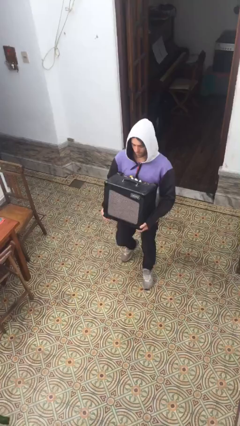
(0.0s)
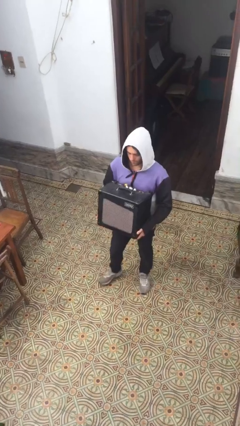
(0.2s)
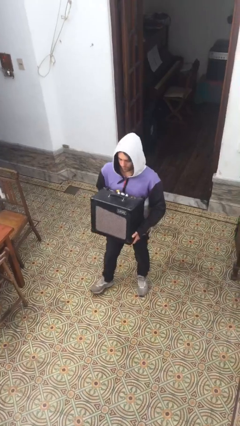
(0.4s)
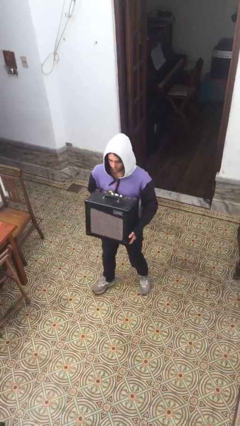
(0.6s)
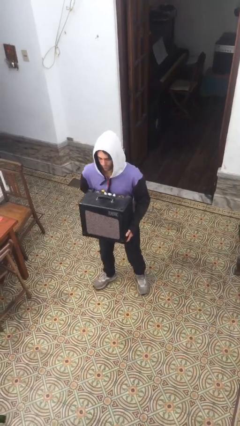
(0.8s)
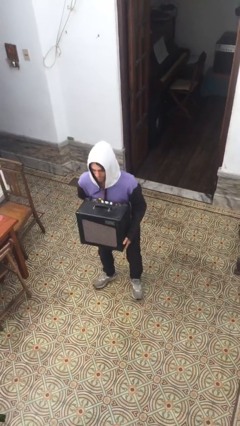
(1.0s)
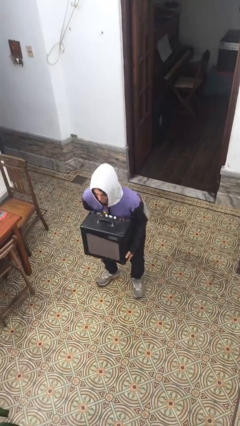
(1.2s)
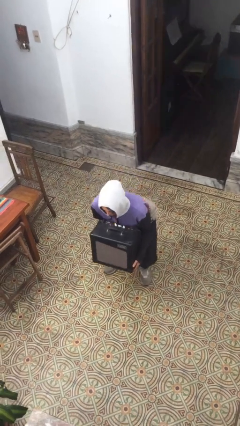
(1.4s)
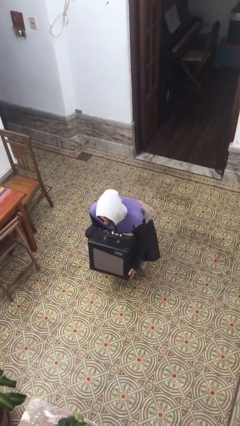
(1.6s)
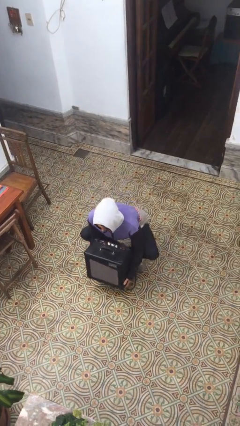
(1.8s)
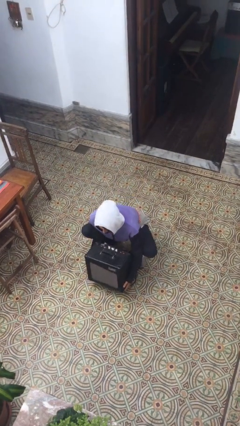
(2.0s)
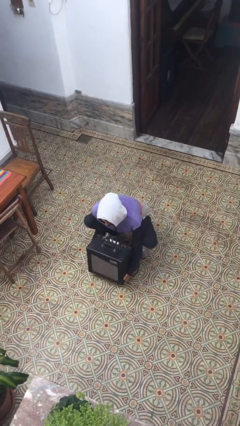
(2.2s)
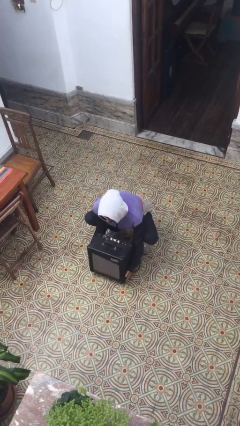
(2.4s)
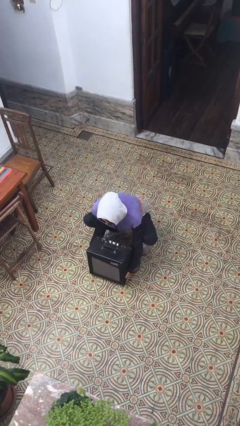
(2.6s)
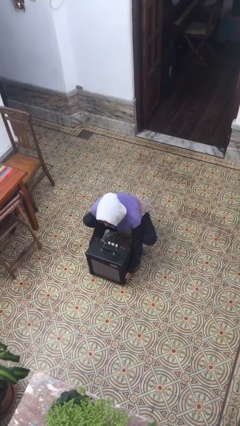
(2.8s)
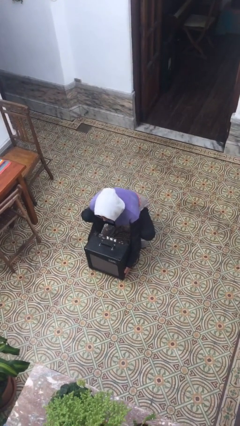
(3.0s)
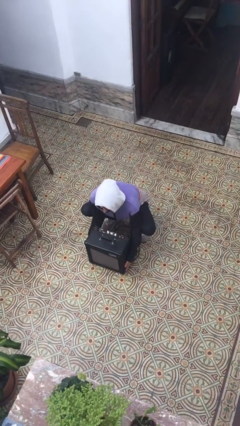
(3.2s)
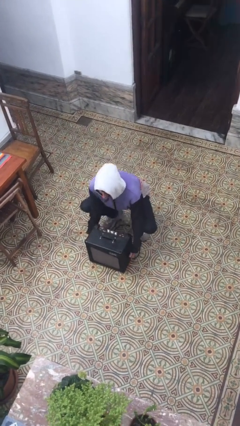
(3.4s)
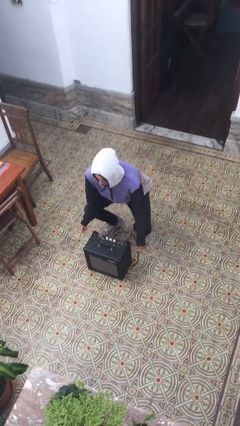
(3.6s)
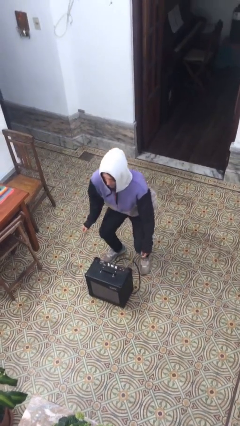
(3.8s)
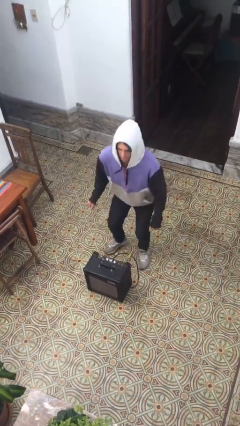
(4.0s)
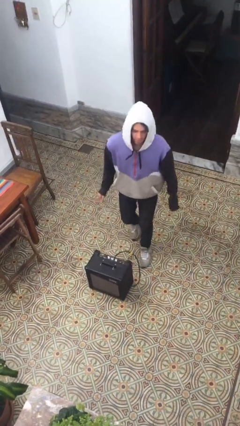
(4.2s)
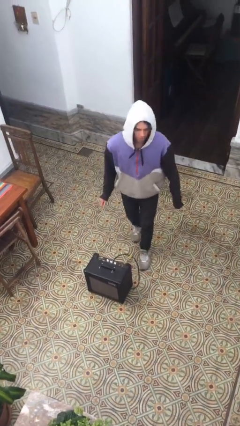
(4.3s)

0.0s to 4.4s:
person puts down object on floor

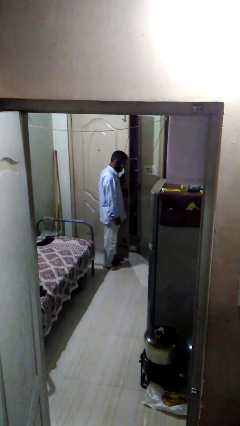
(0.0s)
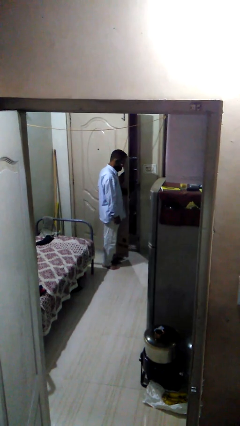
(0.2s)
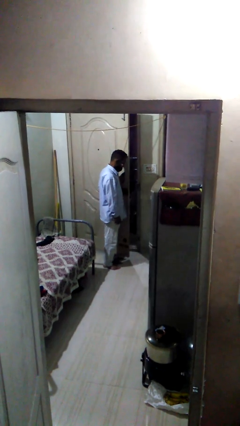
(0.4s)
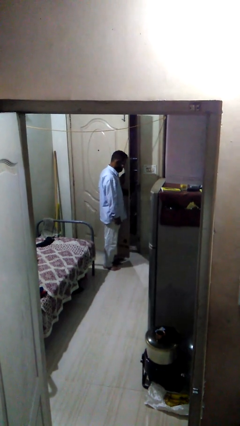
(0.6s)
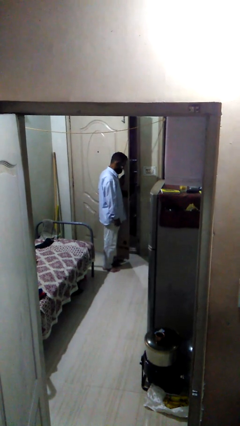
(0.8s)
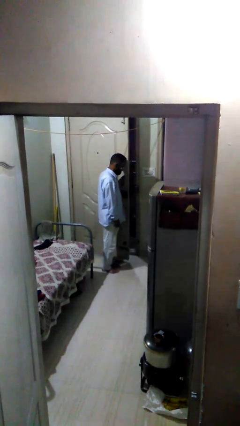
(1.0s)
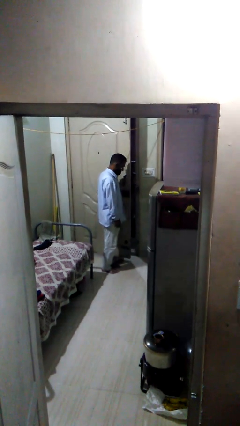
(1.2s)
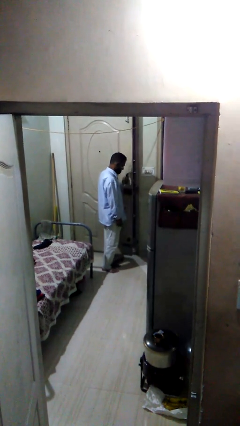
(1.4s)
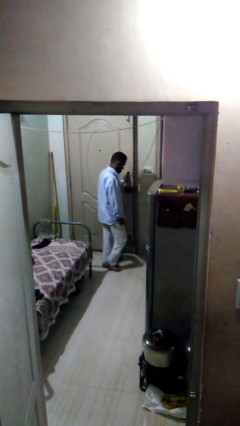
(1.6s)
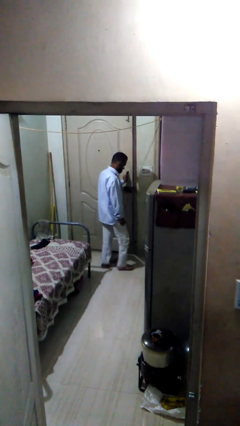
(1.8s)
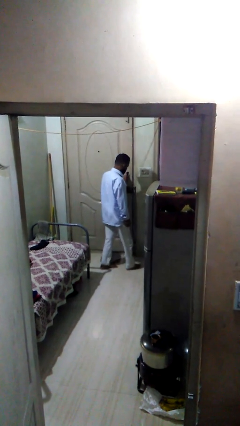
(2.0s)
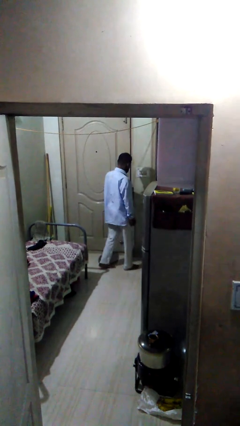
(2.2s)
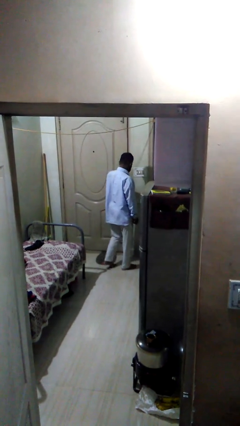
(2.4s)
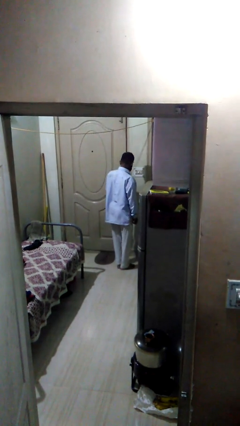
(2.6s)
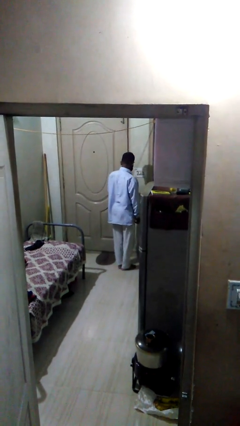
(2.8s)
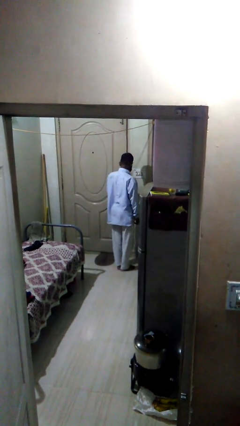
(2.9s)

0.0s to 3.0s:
person closes facility door

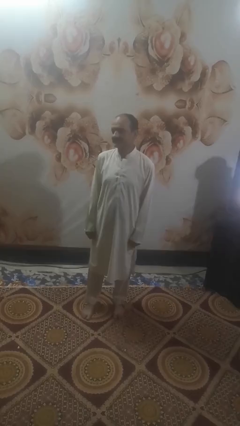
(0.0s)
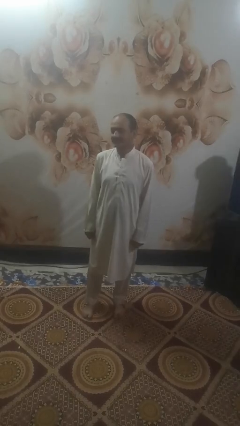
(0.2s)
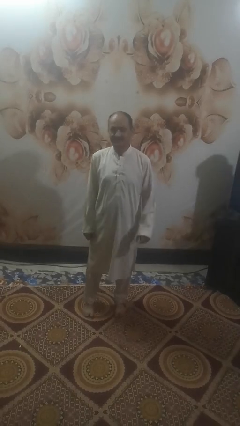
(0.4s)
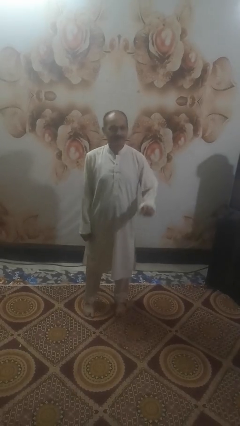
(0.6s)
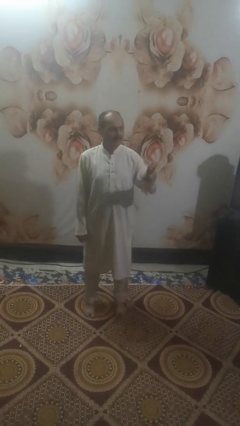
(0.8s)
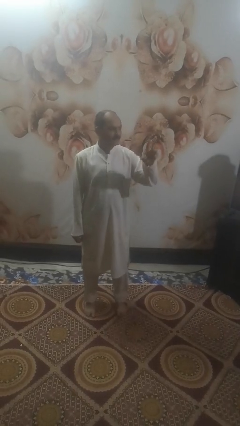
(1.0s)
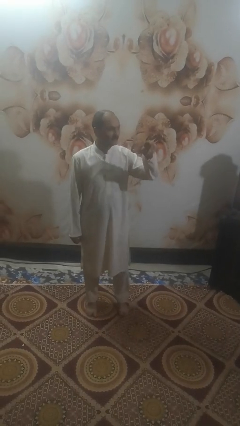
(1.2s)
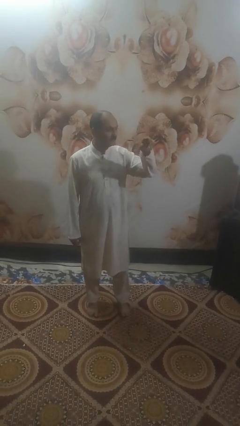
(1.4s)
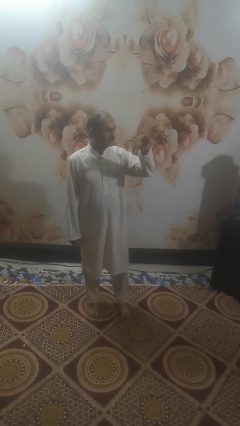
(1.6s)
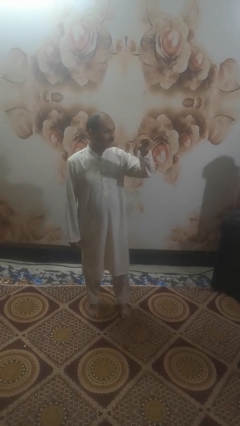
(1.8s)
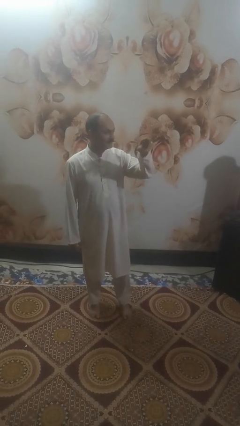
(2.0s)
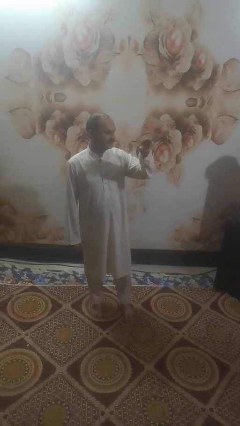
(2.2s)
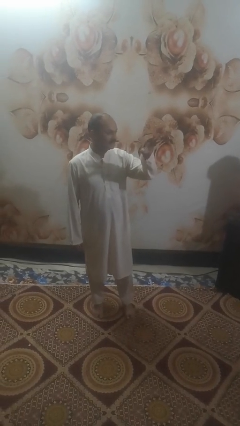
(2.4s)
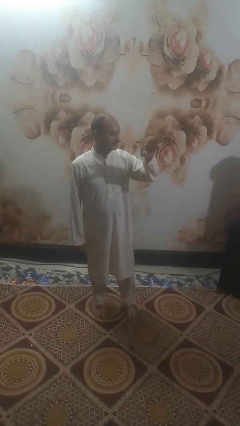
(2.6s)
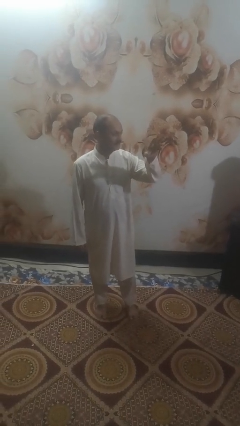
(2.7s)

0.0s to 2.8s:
person gestures come here

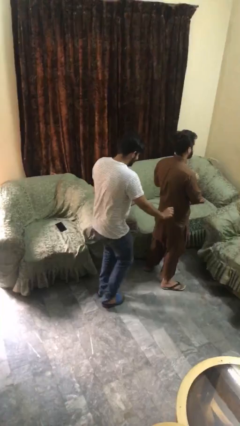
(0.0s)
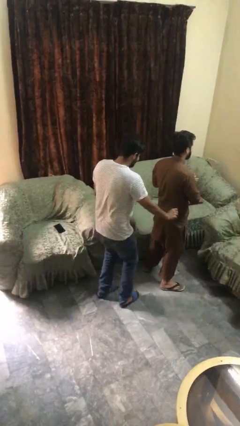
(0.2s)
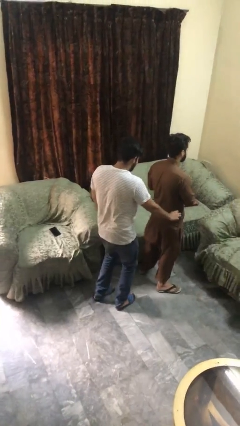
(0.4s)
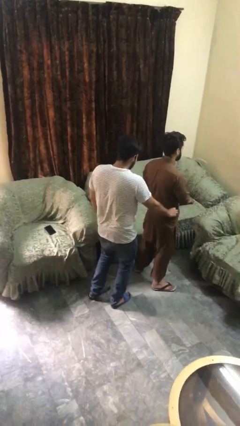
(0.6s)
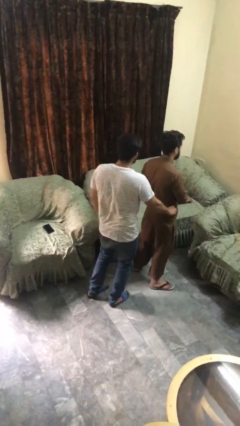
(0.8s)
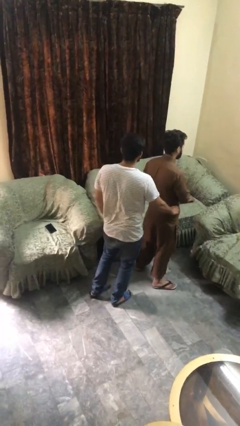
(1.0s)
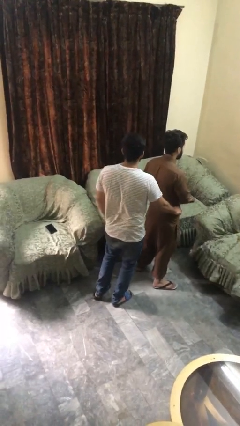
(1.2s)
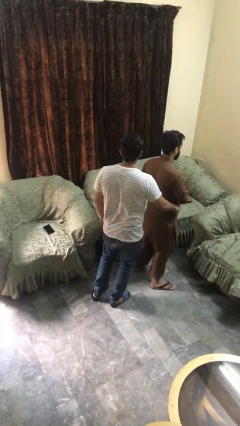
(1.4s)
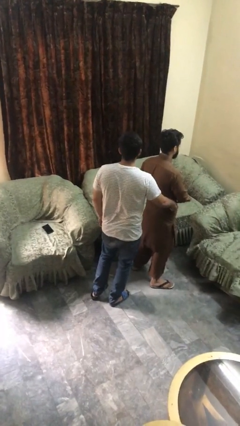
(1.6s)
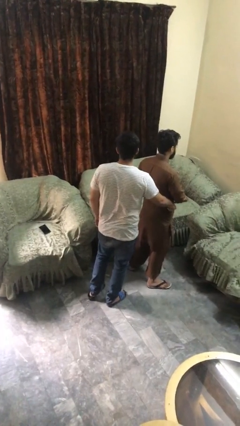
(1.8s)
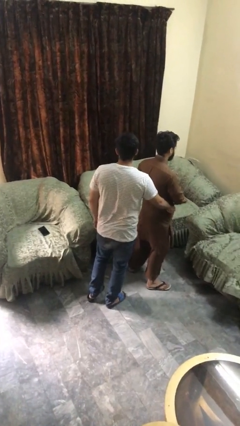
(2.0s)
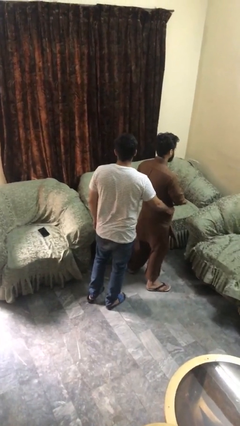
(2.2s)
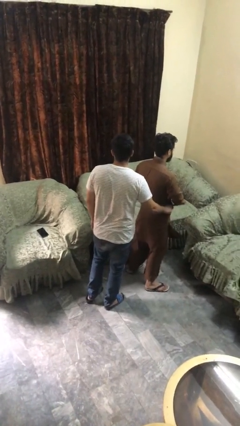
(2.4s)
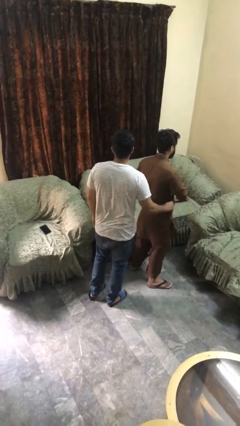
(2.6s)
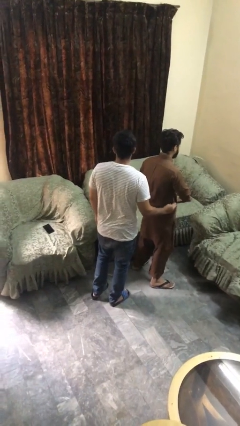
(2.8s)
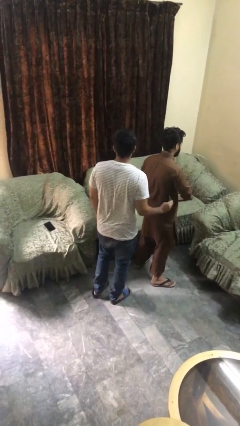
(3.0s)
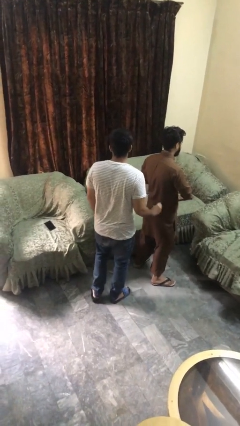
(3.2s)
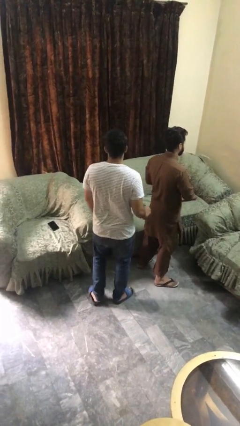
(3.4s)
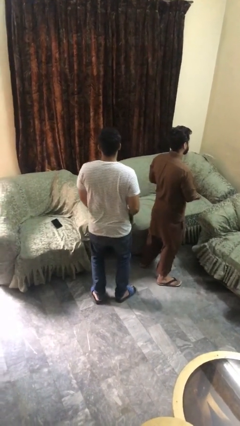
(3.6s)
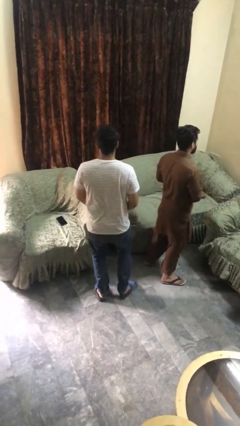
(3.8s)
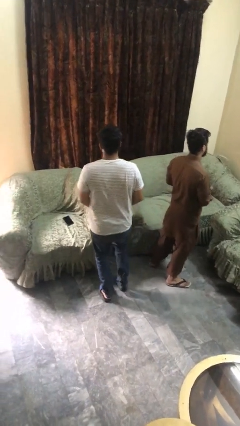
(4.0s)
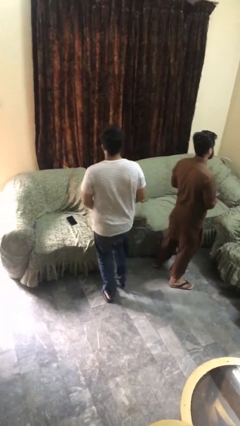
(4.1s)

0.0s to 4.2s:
person steals object from person

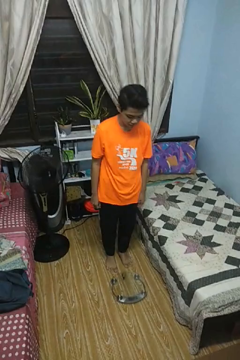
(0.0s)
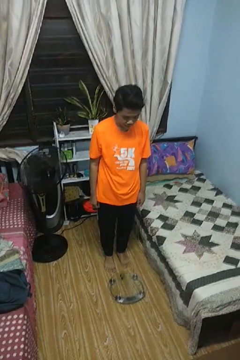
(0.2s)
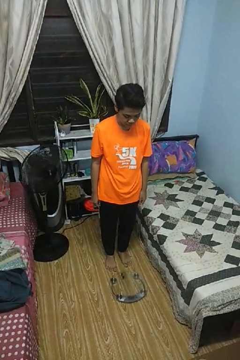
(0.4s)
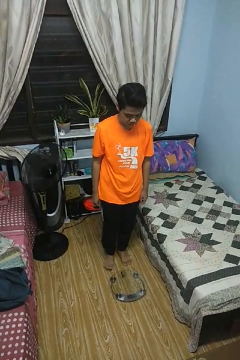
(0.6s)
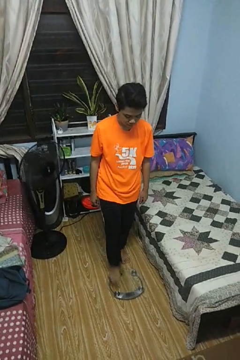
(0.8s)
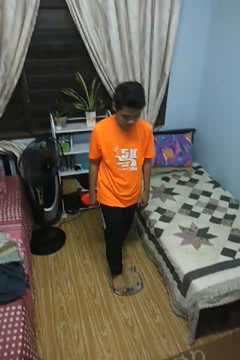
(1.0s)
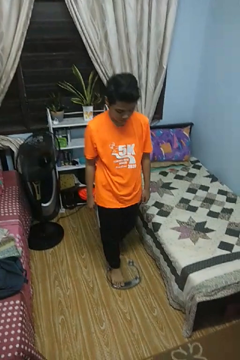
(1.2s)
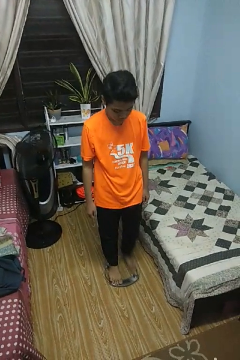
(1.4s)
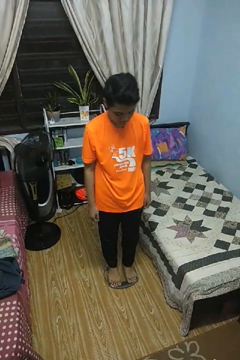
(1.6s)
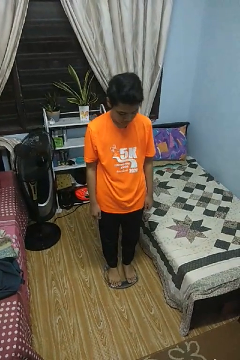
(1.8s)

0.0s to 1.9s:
person uses bodyweight scale

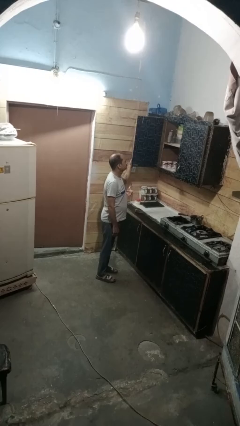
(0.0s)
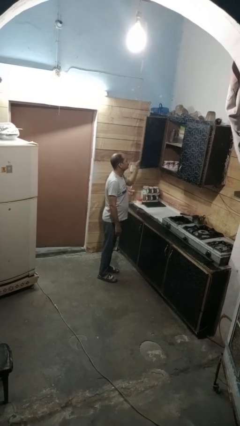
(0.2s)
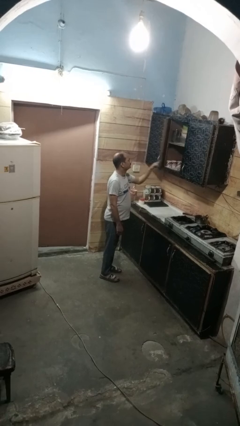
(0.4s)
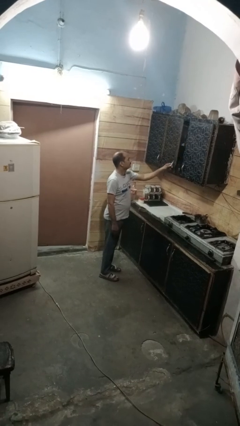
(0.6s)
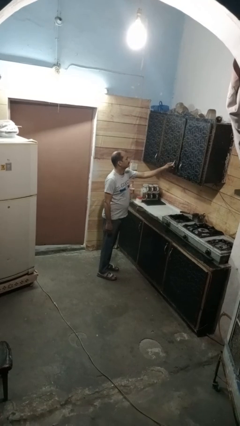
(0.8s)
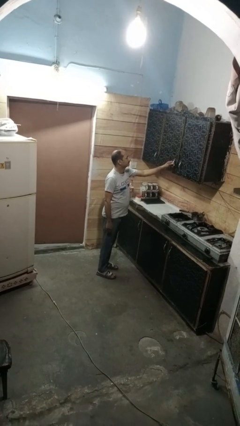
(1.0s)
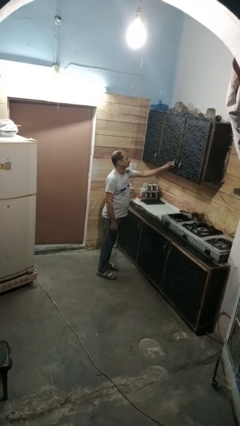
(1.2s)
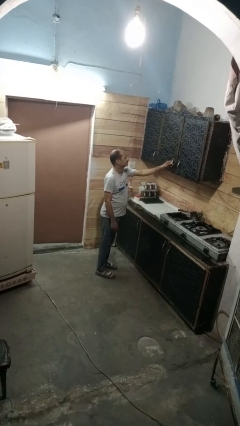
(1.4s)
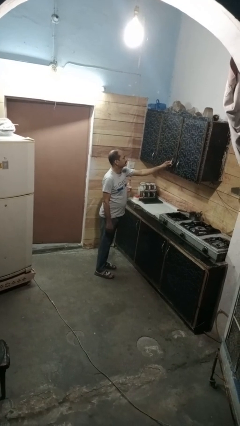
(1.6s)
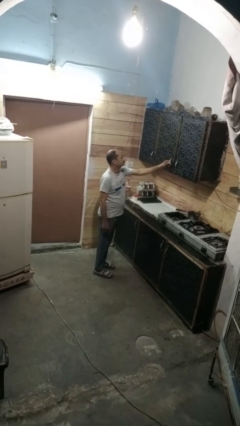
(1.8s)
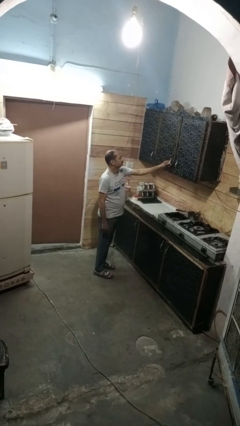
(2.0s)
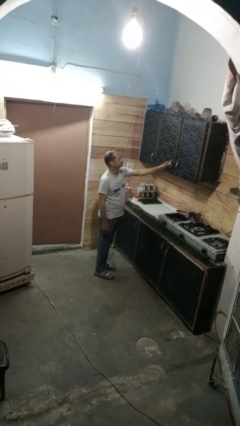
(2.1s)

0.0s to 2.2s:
person closes cabinet
